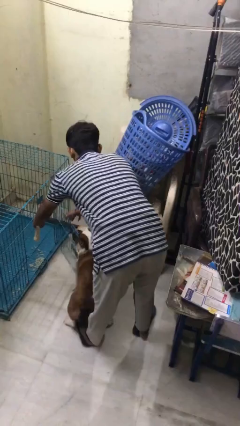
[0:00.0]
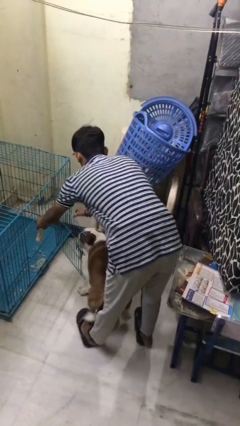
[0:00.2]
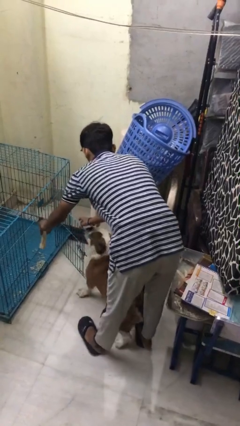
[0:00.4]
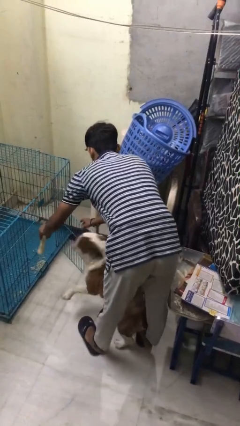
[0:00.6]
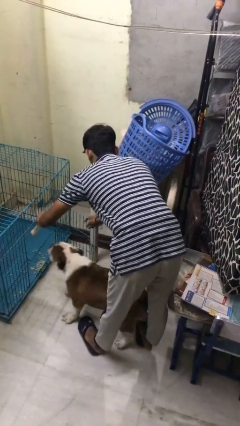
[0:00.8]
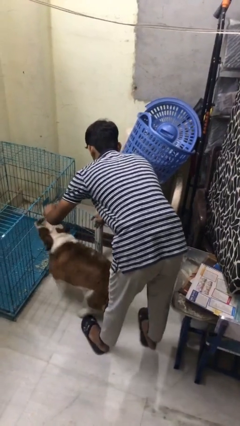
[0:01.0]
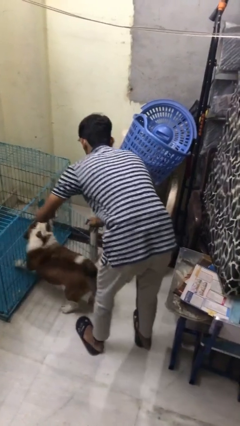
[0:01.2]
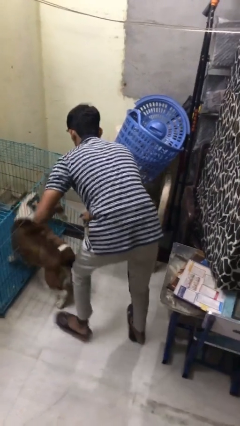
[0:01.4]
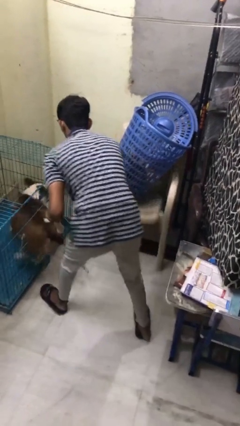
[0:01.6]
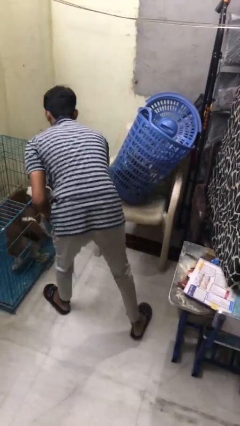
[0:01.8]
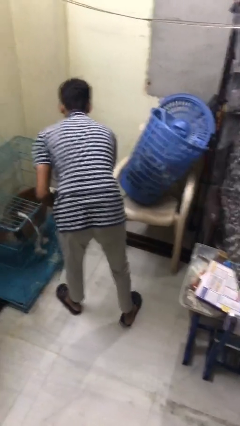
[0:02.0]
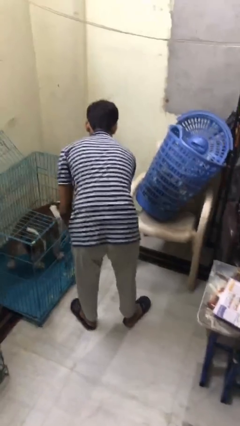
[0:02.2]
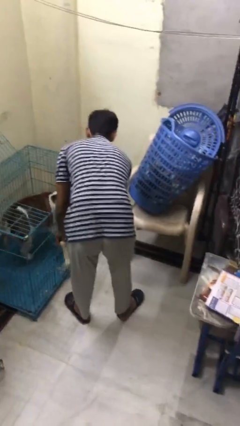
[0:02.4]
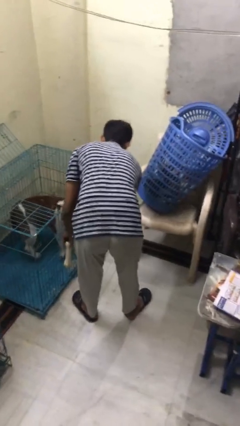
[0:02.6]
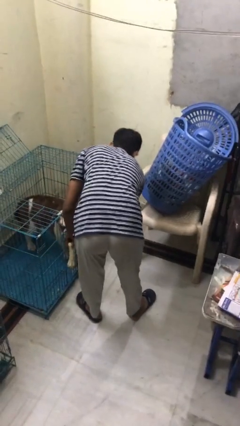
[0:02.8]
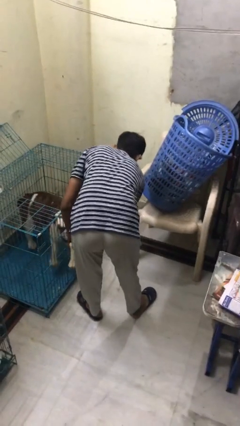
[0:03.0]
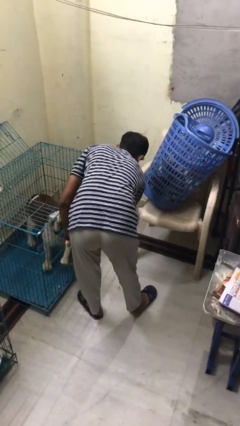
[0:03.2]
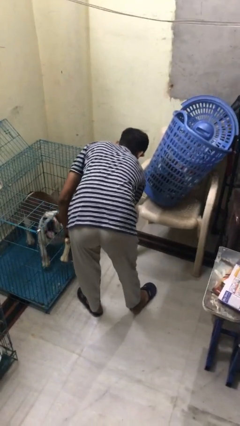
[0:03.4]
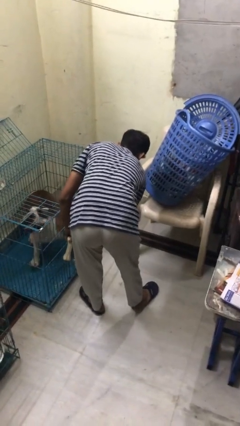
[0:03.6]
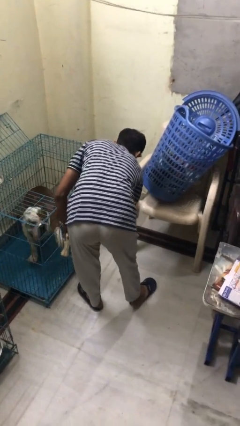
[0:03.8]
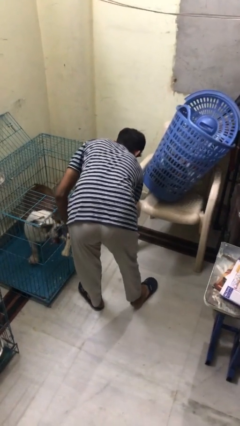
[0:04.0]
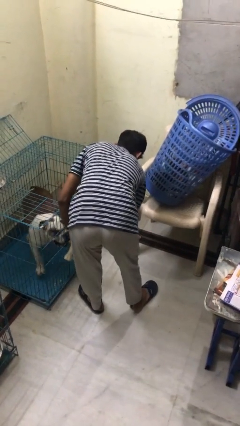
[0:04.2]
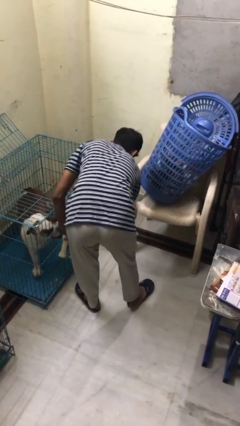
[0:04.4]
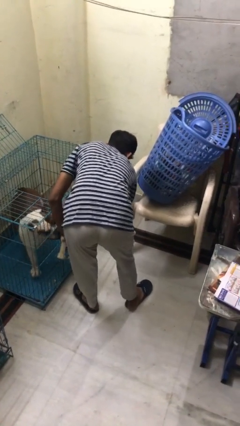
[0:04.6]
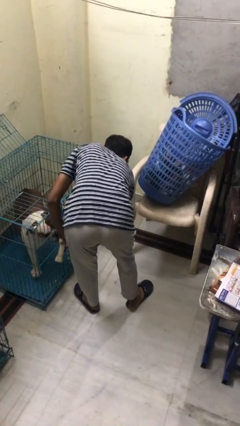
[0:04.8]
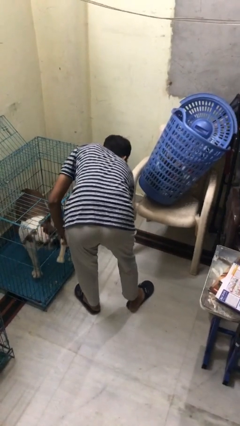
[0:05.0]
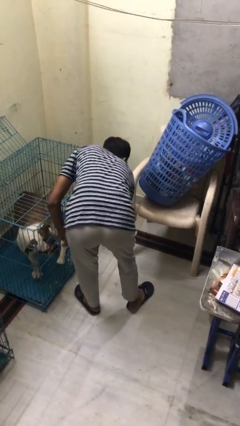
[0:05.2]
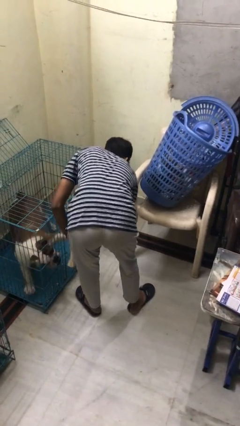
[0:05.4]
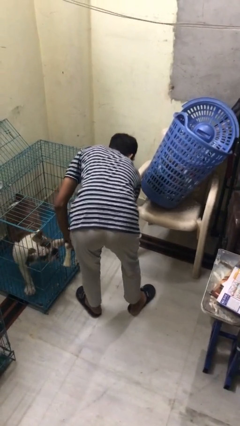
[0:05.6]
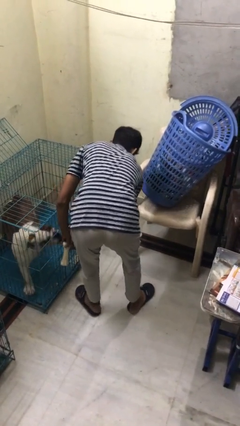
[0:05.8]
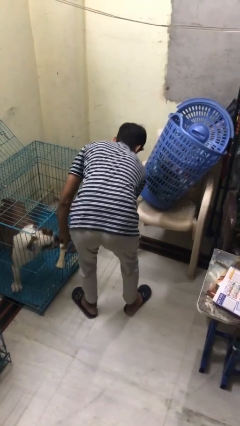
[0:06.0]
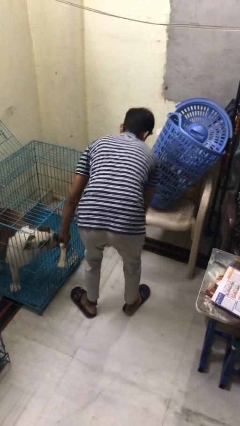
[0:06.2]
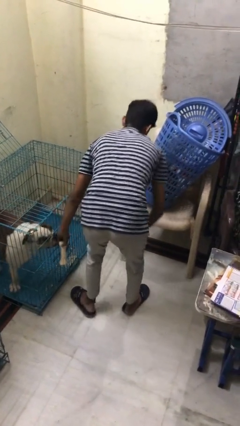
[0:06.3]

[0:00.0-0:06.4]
person crates dog

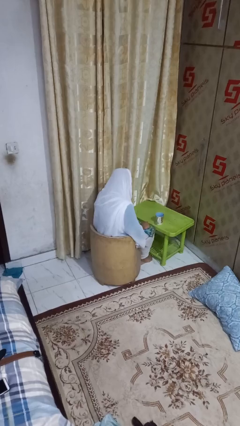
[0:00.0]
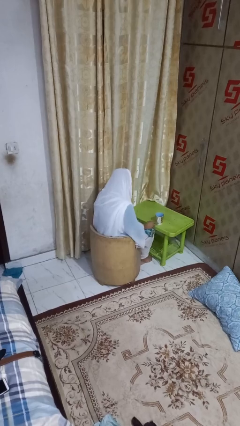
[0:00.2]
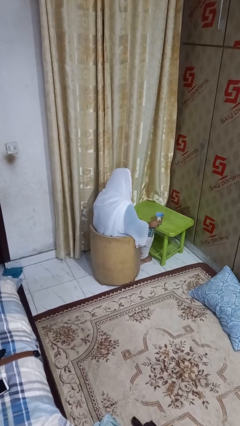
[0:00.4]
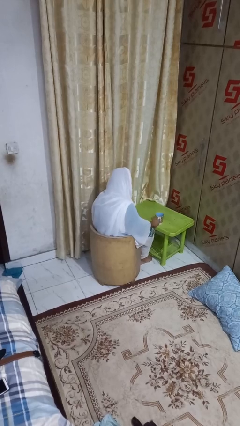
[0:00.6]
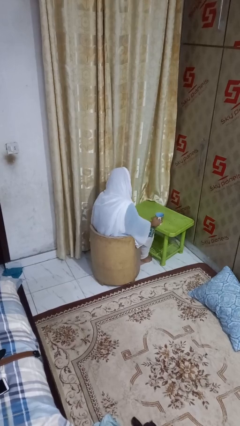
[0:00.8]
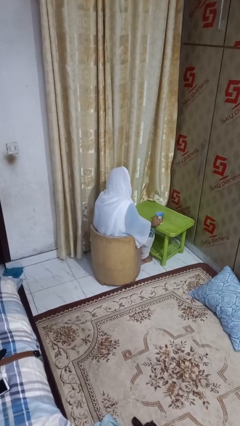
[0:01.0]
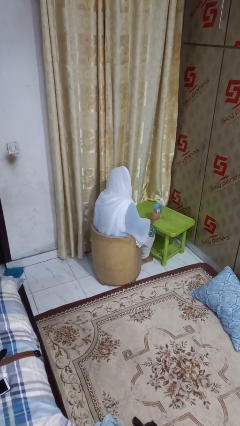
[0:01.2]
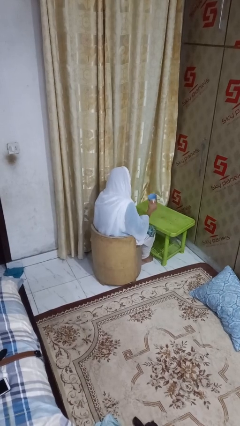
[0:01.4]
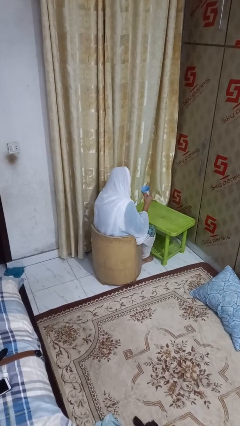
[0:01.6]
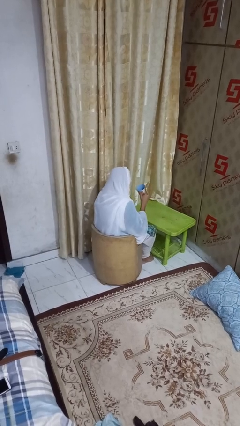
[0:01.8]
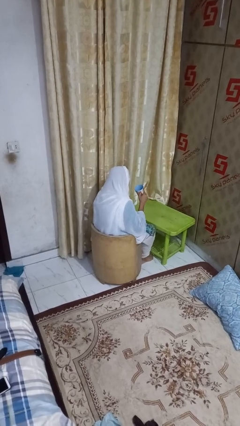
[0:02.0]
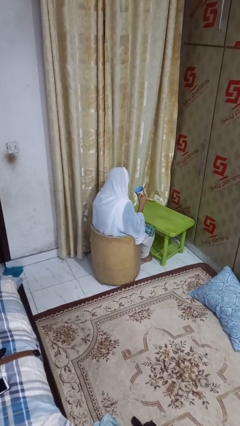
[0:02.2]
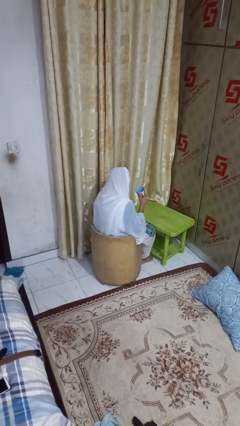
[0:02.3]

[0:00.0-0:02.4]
person picks up object from table

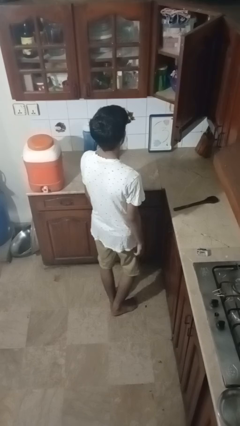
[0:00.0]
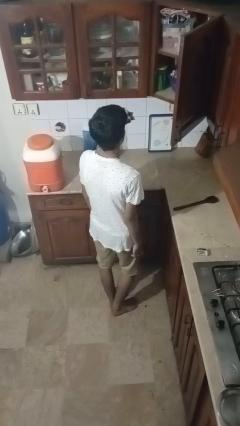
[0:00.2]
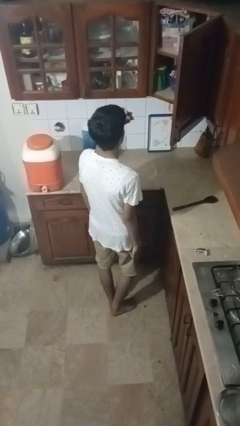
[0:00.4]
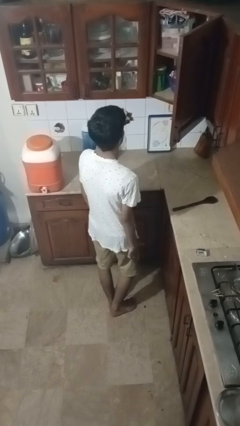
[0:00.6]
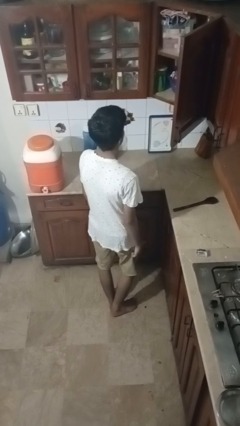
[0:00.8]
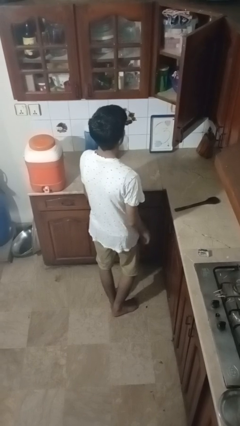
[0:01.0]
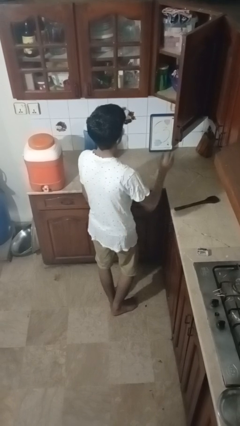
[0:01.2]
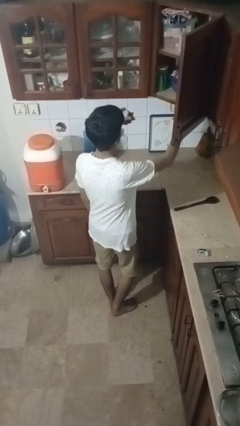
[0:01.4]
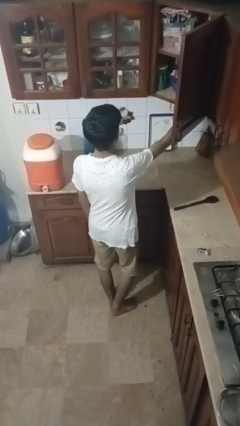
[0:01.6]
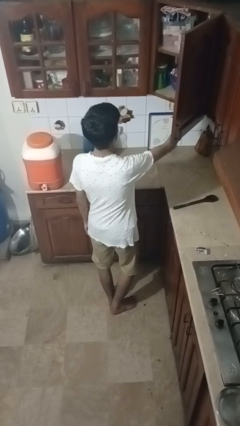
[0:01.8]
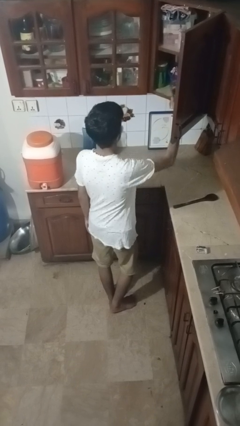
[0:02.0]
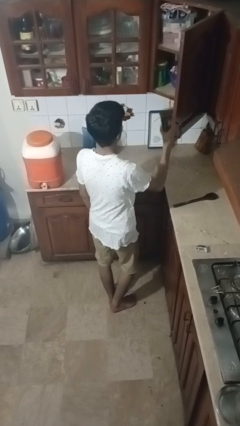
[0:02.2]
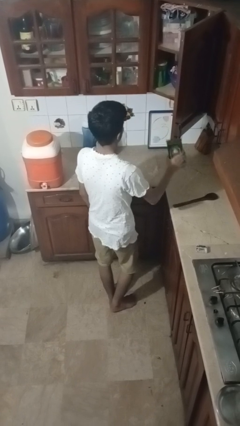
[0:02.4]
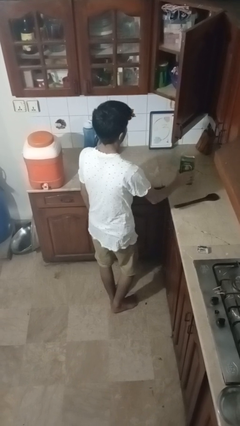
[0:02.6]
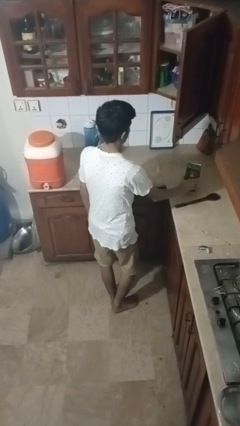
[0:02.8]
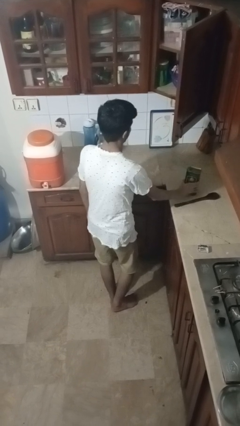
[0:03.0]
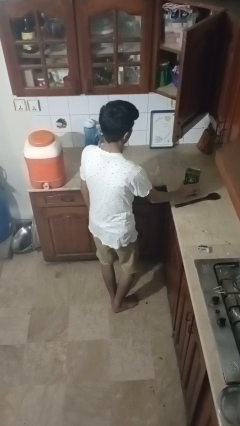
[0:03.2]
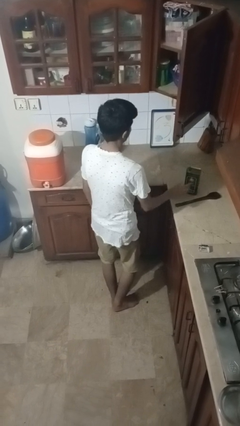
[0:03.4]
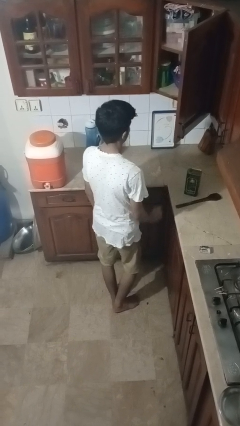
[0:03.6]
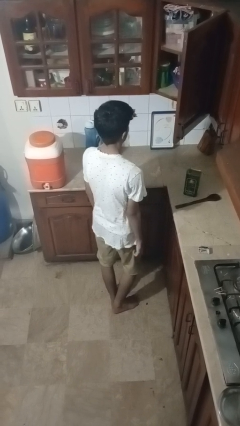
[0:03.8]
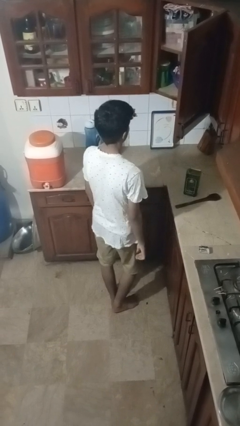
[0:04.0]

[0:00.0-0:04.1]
person takes object from cabinet

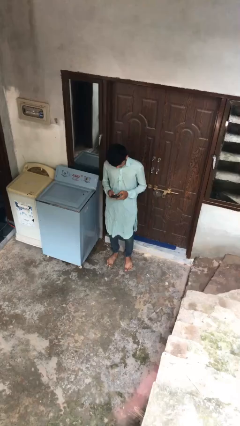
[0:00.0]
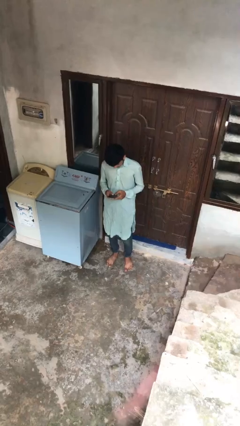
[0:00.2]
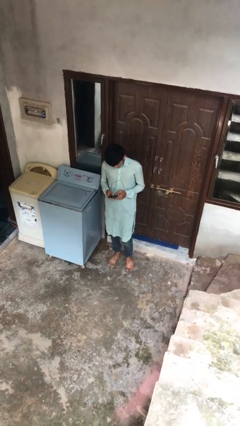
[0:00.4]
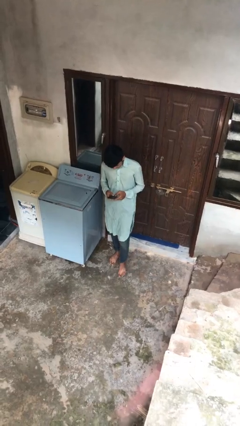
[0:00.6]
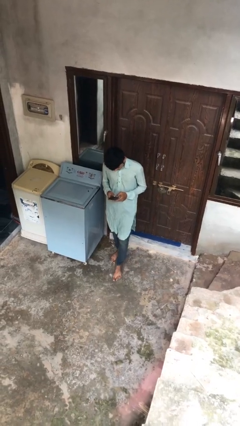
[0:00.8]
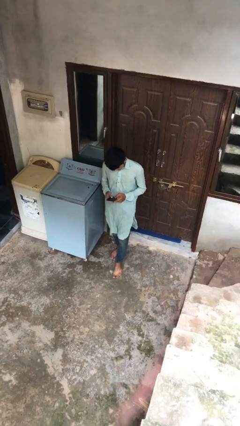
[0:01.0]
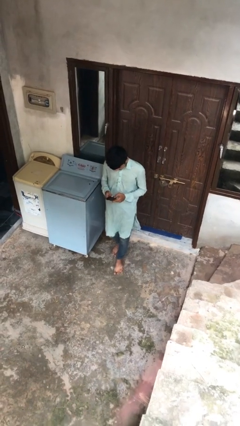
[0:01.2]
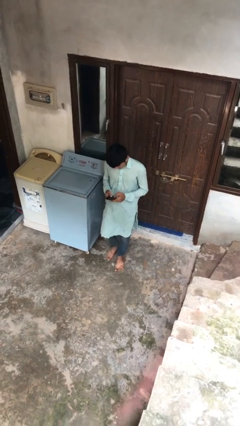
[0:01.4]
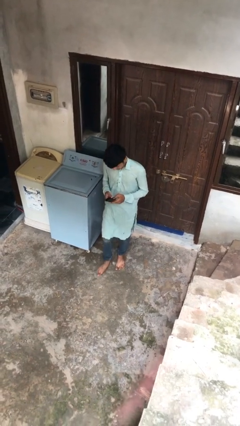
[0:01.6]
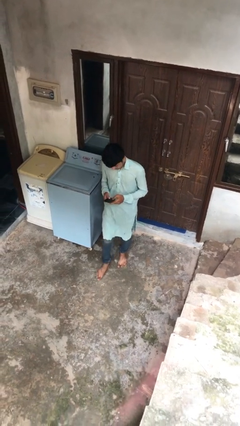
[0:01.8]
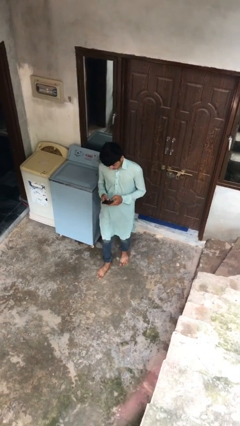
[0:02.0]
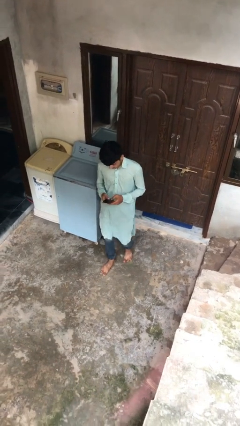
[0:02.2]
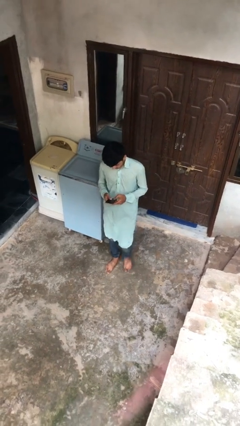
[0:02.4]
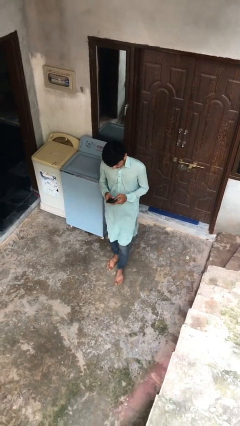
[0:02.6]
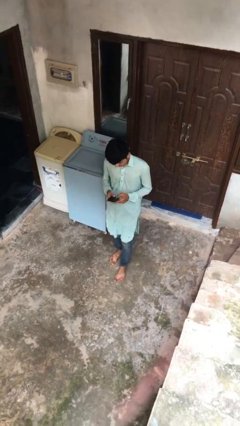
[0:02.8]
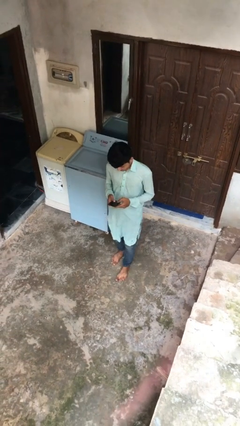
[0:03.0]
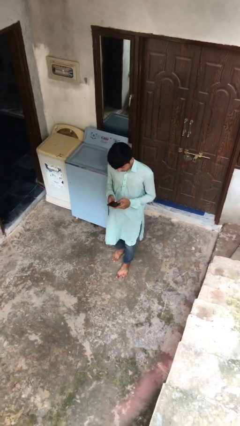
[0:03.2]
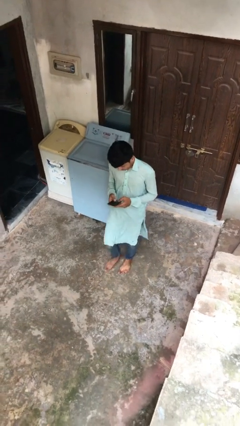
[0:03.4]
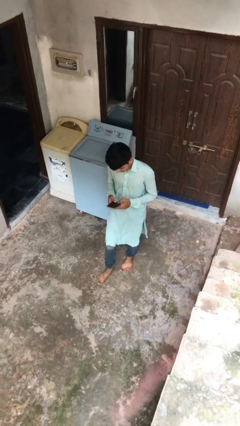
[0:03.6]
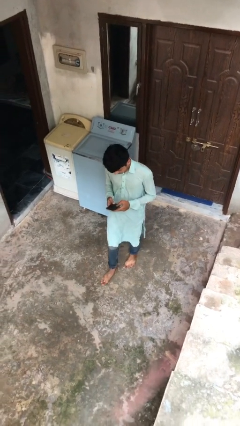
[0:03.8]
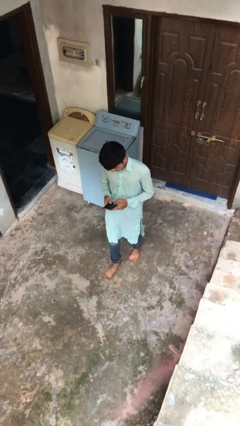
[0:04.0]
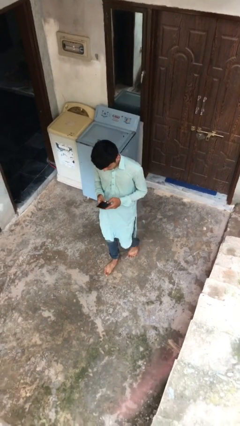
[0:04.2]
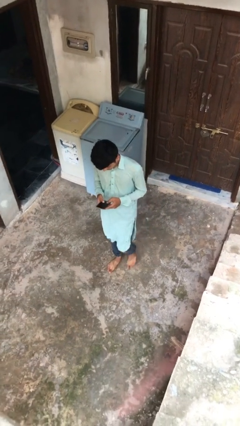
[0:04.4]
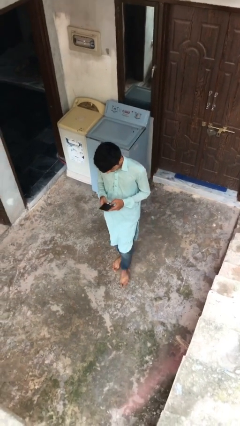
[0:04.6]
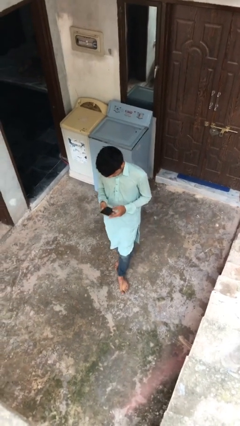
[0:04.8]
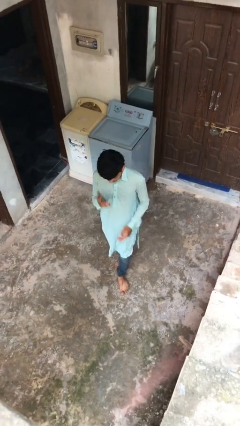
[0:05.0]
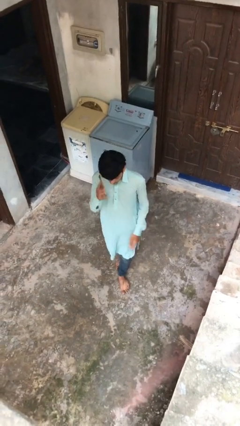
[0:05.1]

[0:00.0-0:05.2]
person texts on phone
